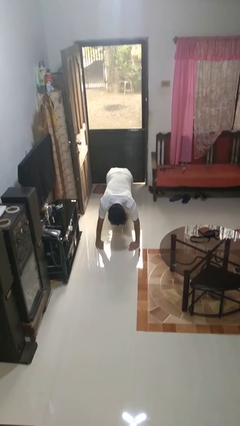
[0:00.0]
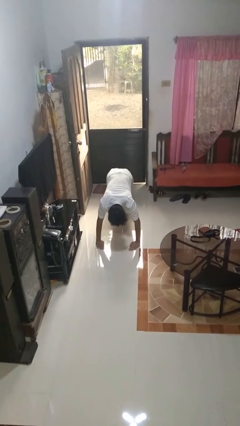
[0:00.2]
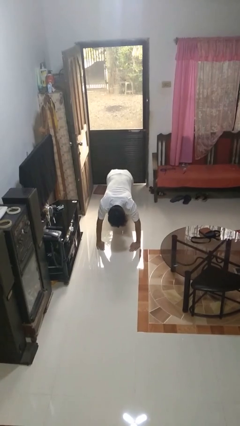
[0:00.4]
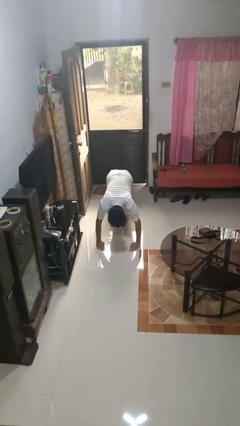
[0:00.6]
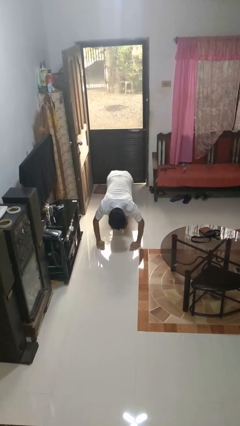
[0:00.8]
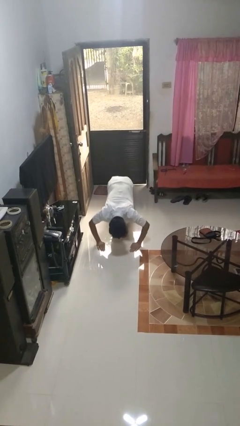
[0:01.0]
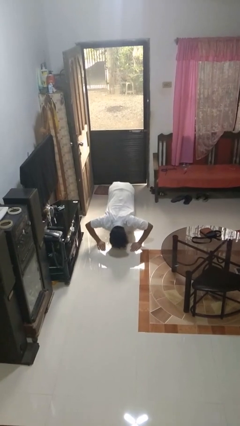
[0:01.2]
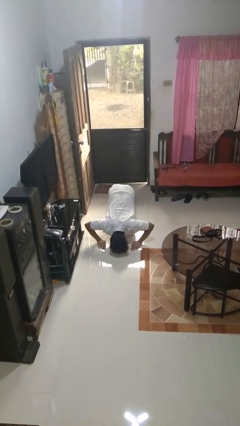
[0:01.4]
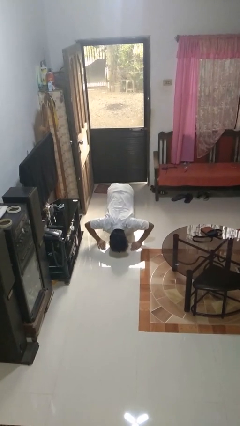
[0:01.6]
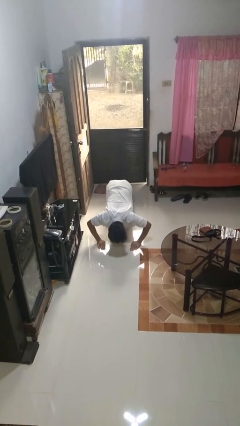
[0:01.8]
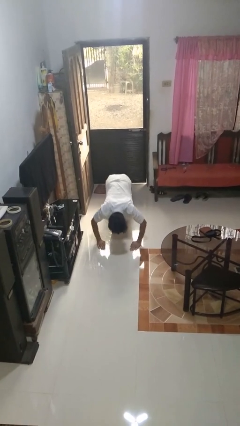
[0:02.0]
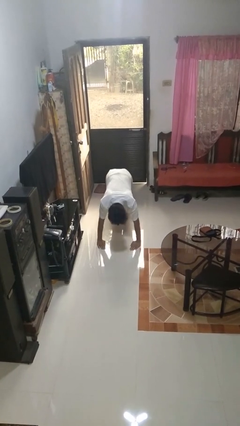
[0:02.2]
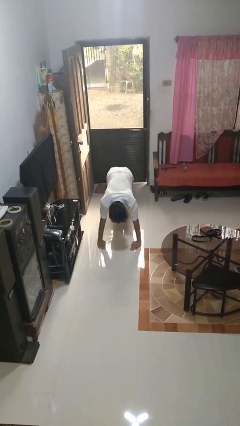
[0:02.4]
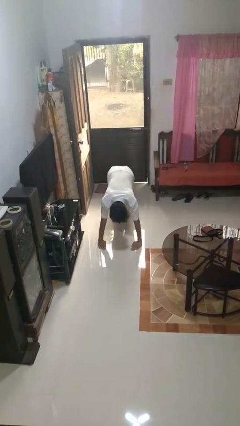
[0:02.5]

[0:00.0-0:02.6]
person exercises with pushup

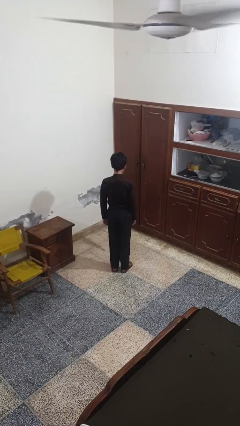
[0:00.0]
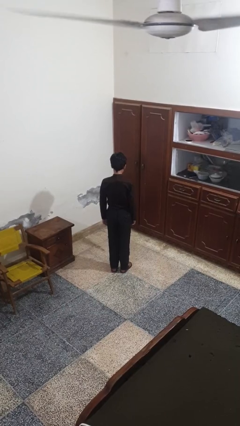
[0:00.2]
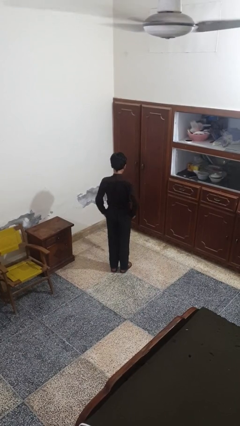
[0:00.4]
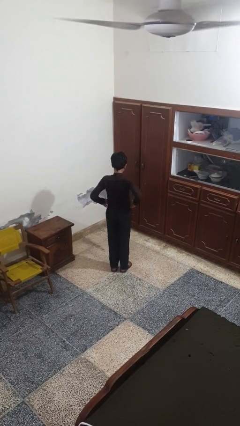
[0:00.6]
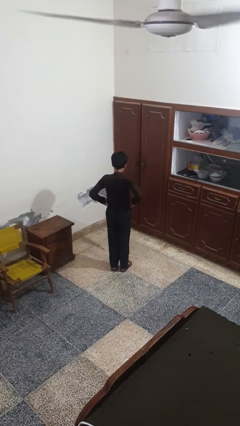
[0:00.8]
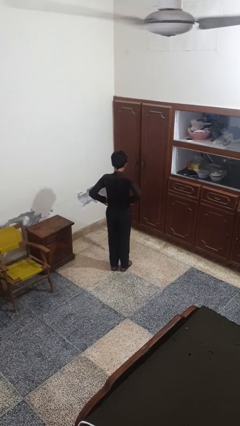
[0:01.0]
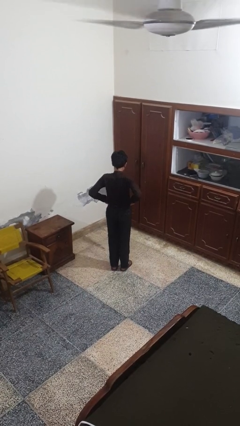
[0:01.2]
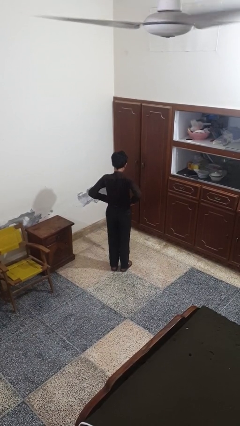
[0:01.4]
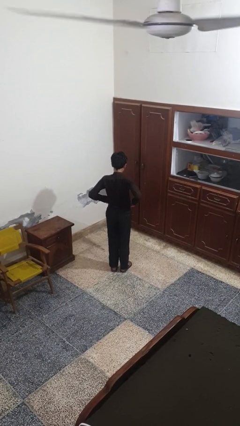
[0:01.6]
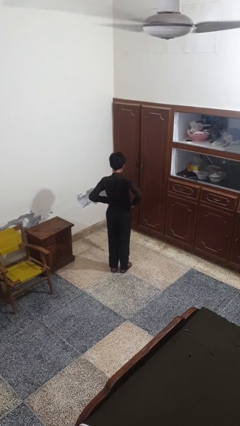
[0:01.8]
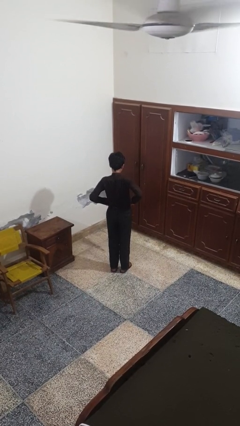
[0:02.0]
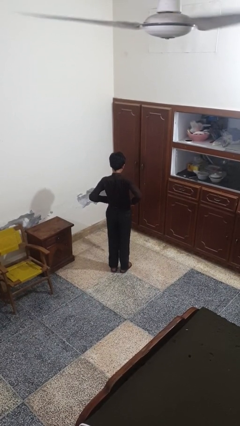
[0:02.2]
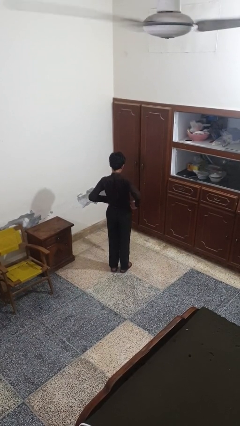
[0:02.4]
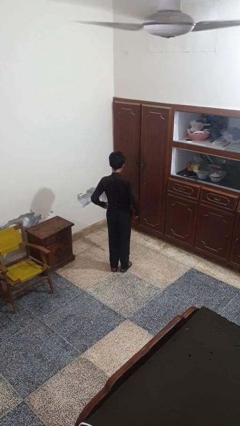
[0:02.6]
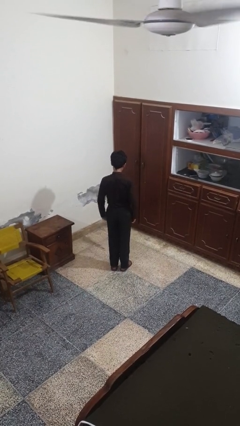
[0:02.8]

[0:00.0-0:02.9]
person hikes up pants

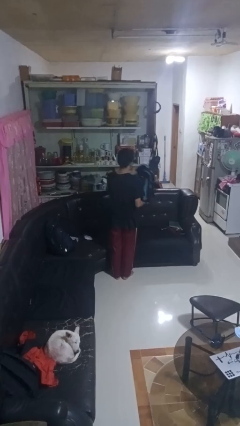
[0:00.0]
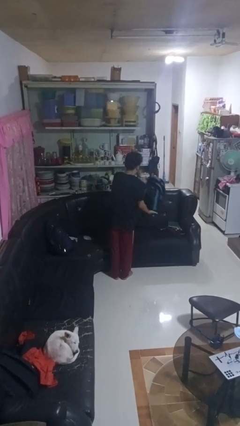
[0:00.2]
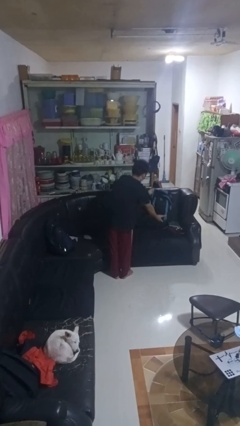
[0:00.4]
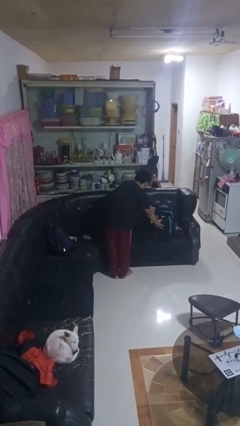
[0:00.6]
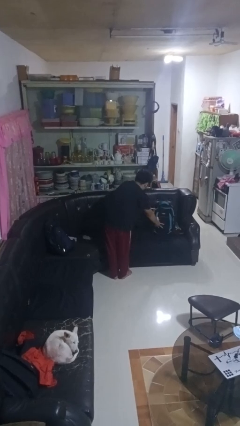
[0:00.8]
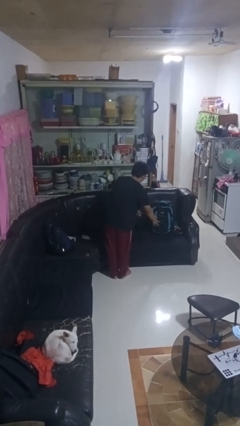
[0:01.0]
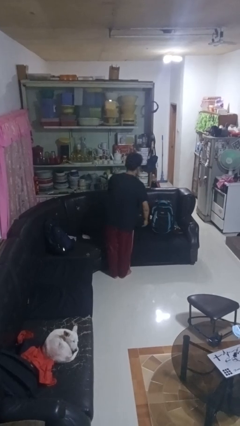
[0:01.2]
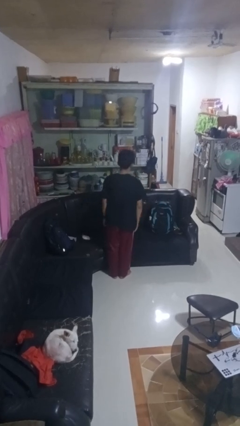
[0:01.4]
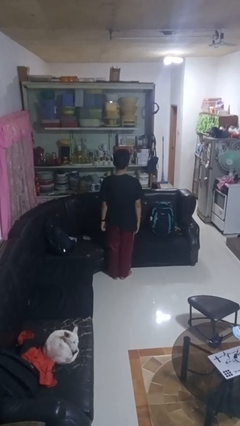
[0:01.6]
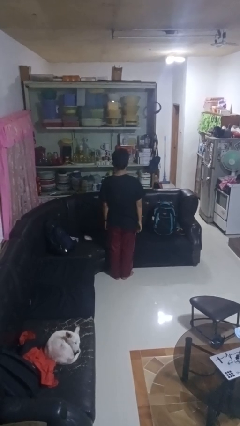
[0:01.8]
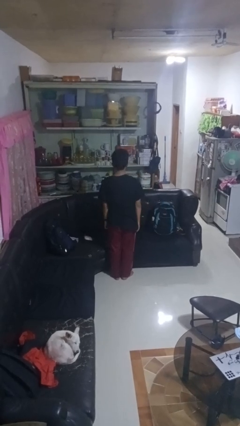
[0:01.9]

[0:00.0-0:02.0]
person puts down object on couch

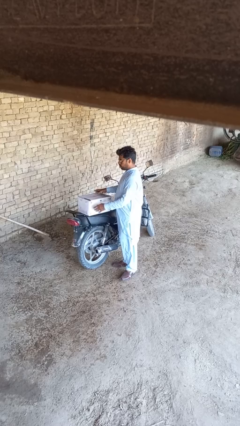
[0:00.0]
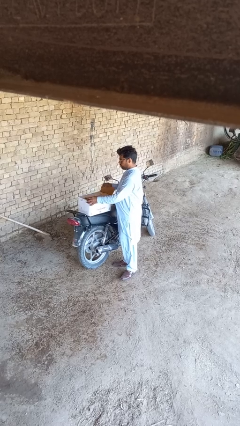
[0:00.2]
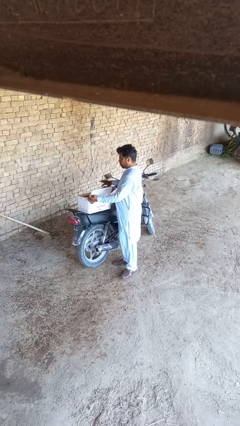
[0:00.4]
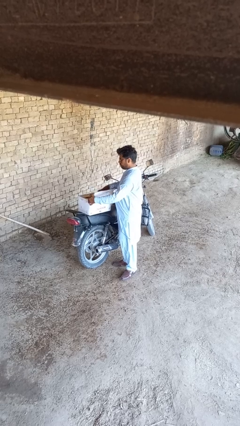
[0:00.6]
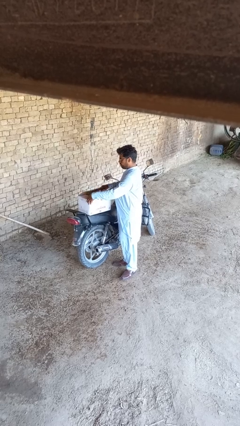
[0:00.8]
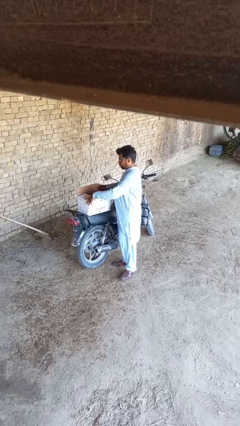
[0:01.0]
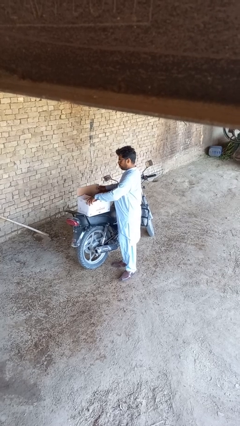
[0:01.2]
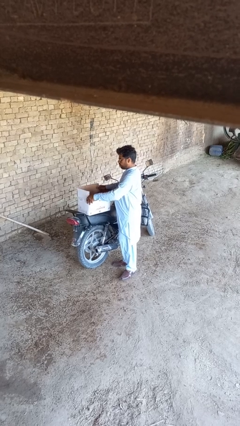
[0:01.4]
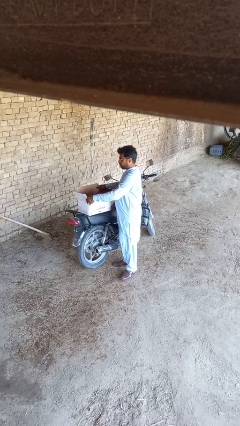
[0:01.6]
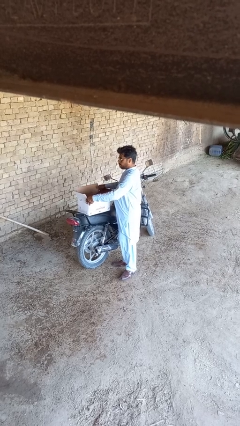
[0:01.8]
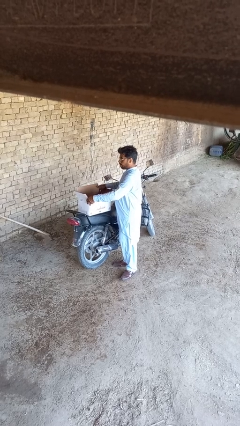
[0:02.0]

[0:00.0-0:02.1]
person opens box

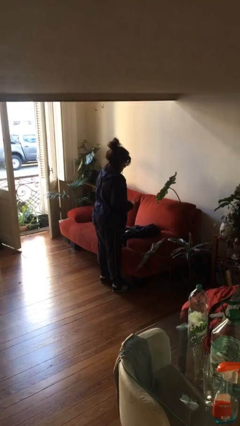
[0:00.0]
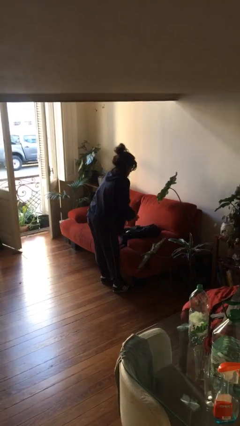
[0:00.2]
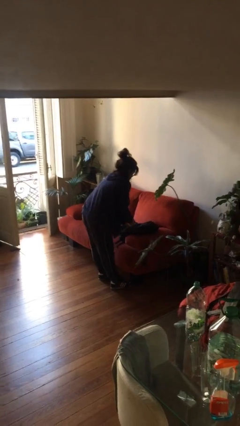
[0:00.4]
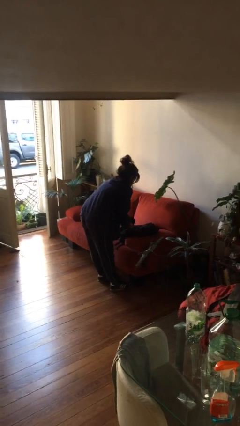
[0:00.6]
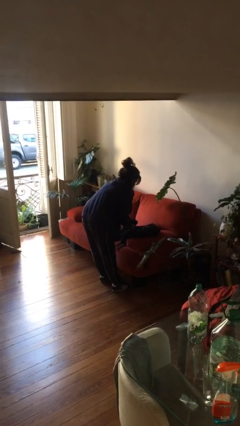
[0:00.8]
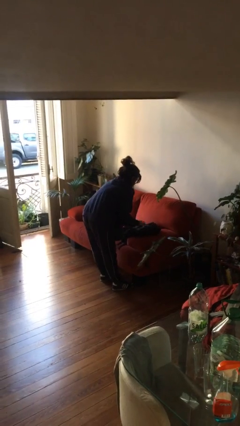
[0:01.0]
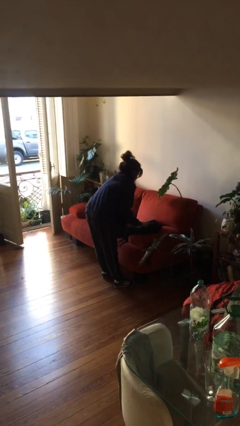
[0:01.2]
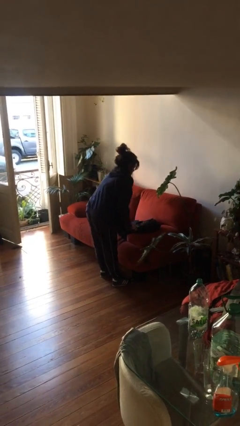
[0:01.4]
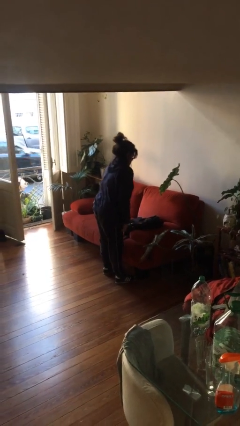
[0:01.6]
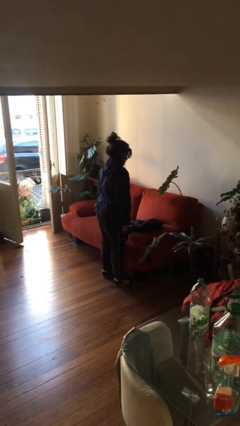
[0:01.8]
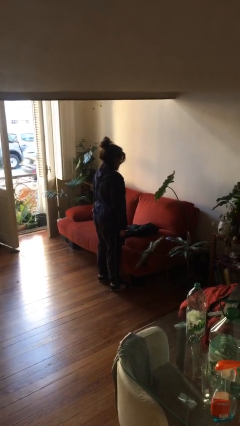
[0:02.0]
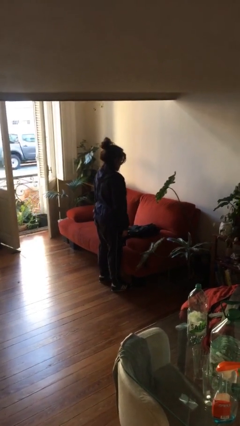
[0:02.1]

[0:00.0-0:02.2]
person puts object into backpack

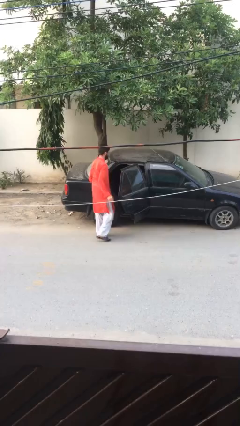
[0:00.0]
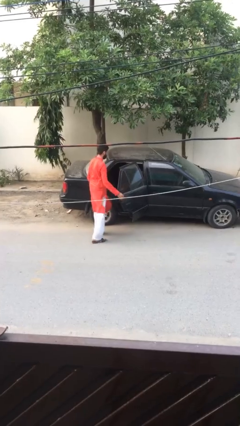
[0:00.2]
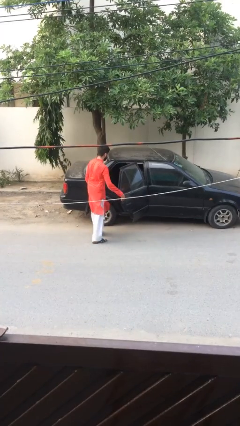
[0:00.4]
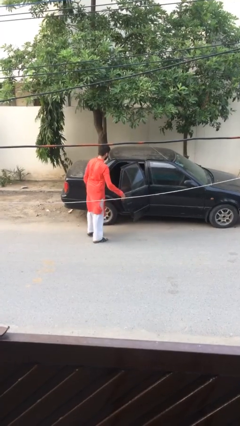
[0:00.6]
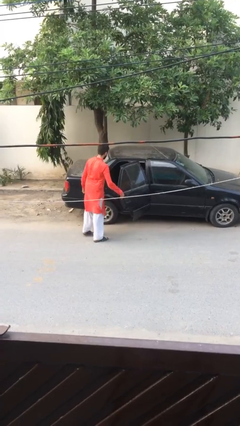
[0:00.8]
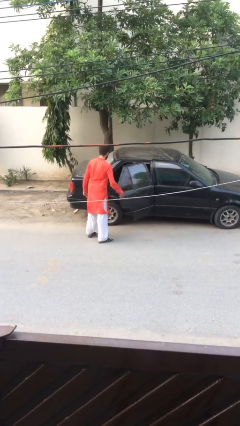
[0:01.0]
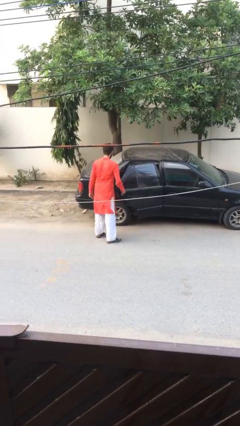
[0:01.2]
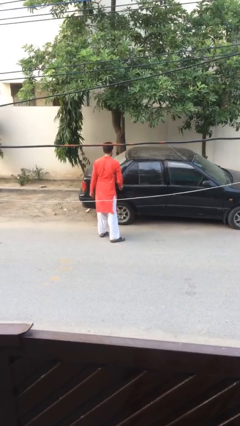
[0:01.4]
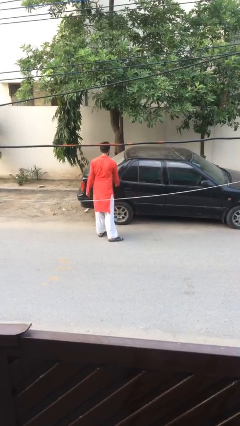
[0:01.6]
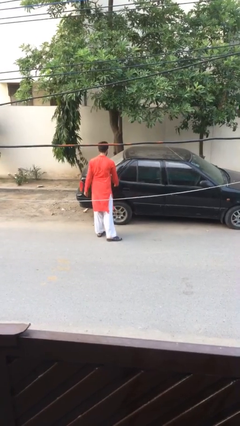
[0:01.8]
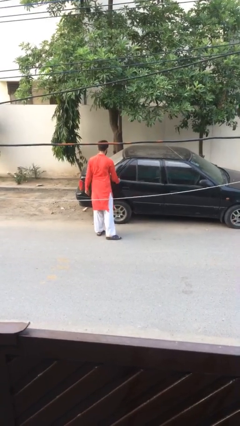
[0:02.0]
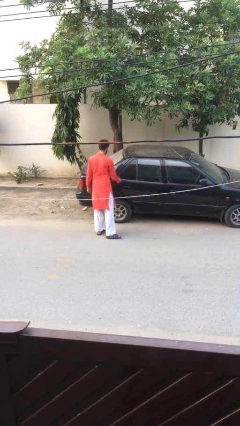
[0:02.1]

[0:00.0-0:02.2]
person closes car door

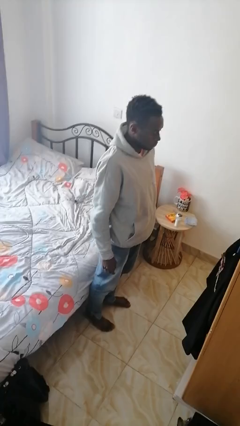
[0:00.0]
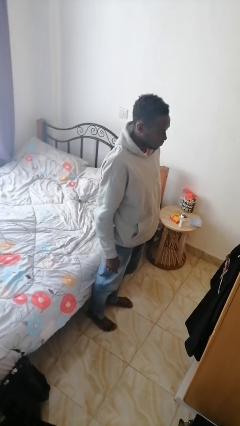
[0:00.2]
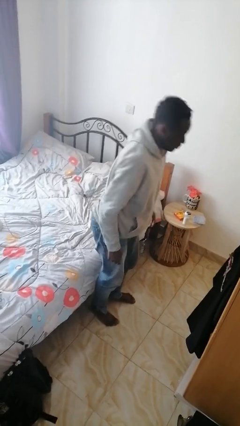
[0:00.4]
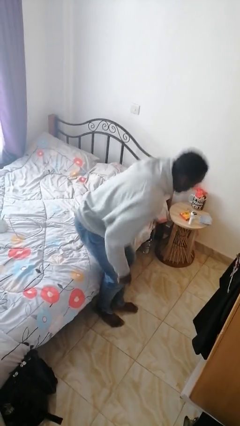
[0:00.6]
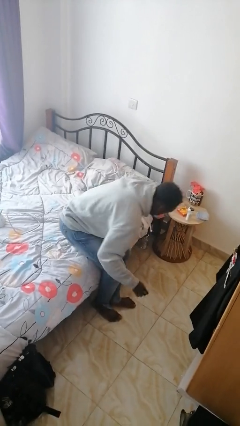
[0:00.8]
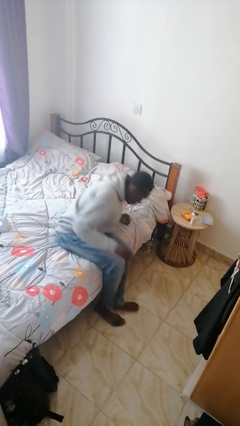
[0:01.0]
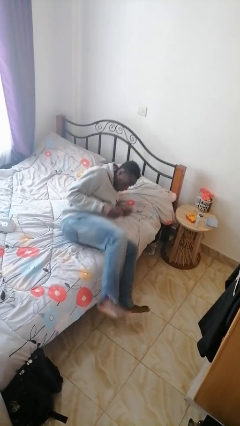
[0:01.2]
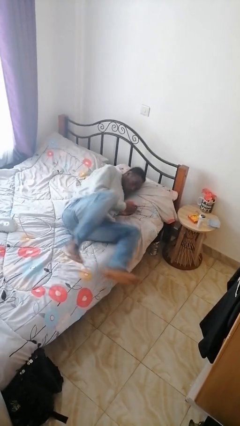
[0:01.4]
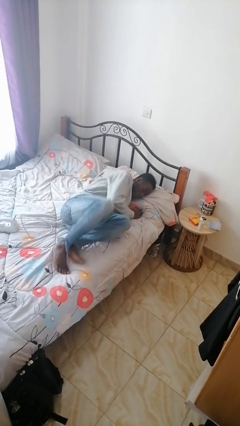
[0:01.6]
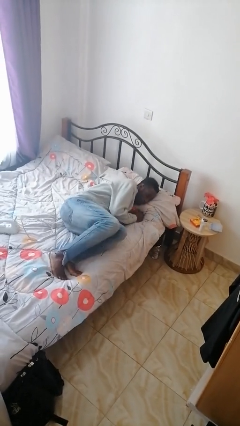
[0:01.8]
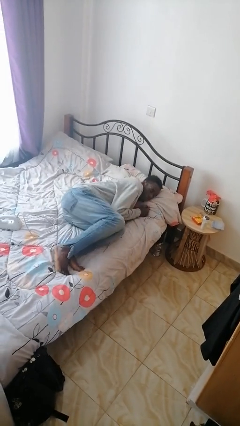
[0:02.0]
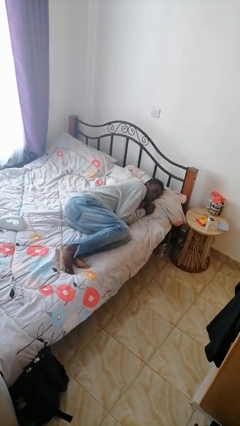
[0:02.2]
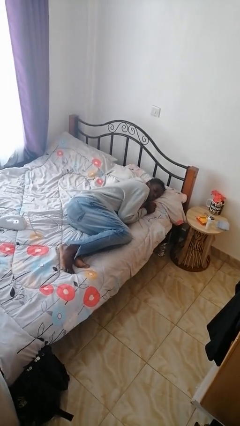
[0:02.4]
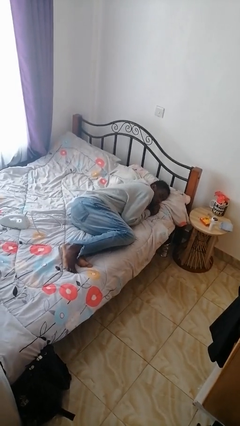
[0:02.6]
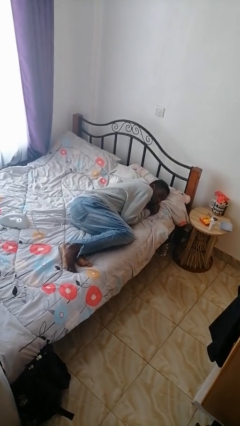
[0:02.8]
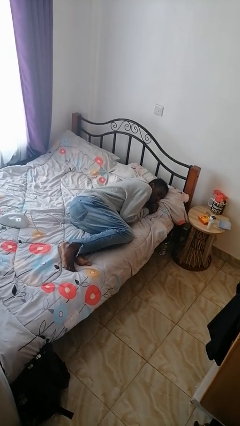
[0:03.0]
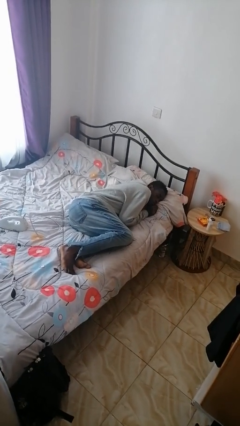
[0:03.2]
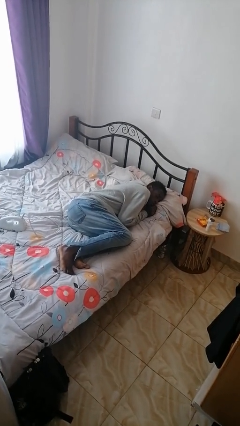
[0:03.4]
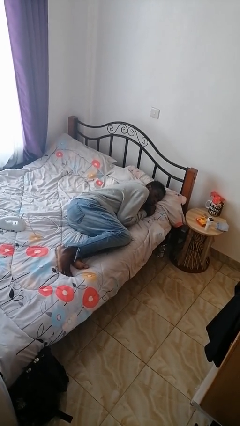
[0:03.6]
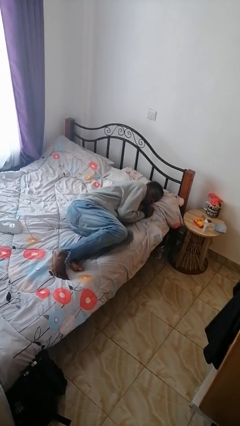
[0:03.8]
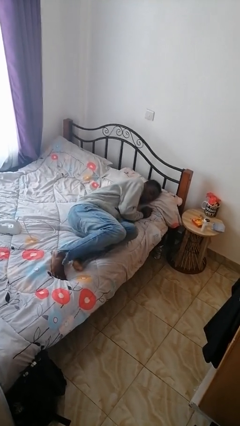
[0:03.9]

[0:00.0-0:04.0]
person lies down on bed
